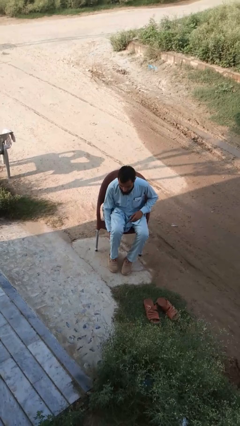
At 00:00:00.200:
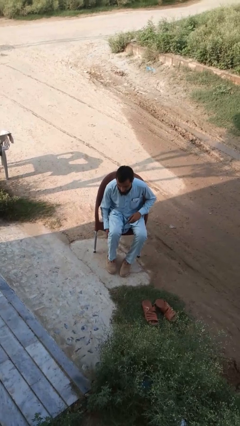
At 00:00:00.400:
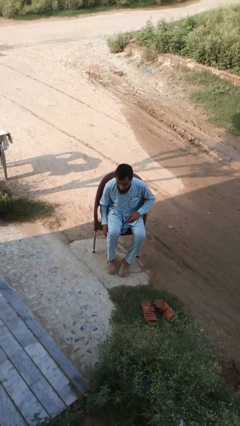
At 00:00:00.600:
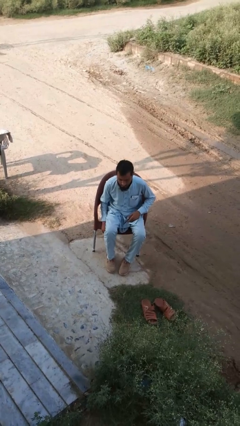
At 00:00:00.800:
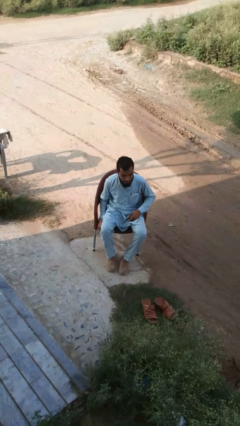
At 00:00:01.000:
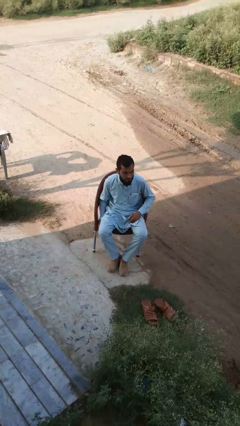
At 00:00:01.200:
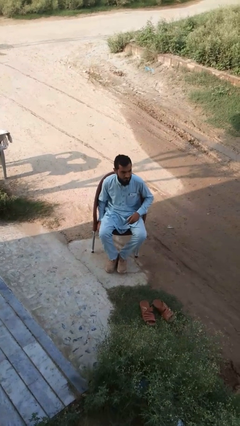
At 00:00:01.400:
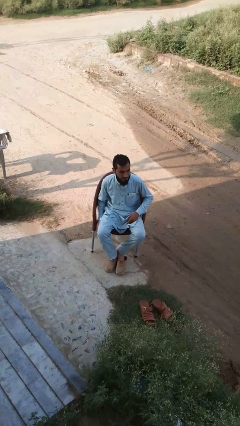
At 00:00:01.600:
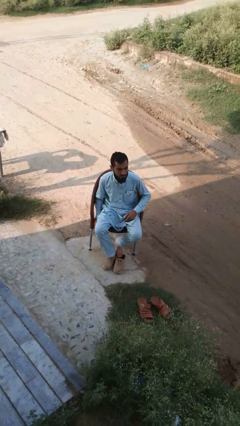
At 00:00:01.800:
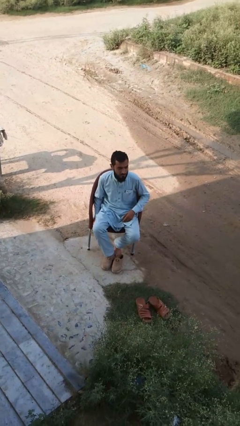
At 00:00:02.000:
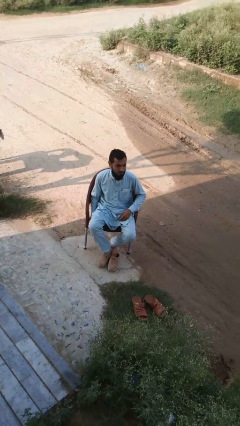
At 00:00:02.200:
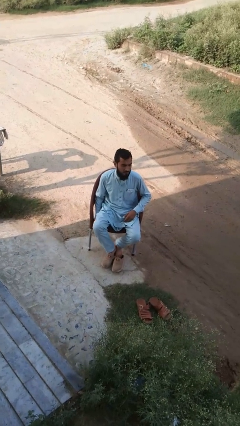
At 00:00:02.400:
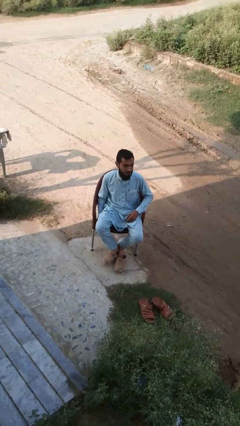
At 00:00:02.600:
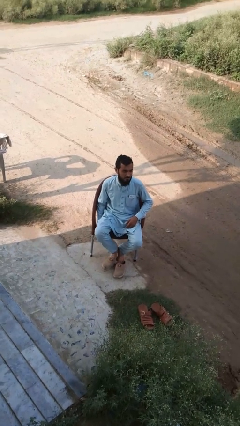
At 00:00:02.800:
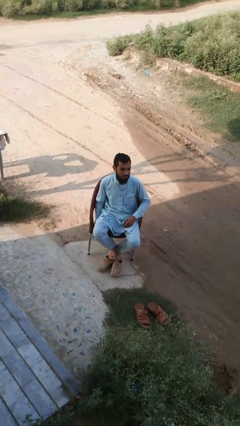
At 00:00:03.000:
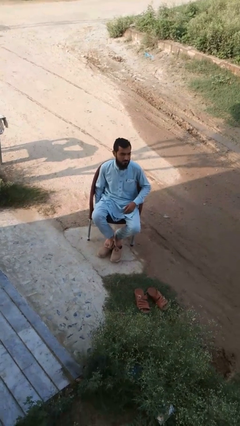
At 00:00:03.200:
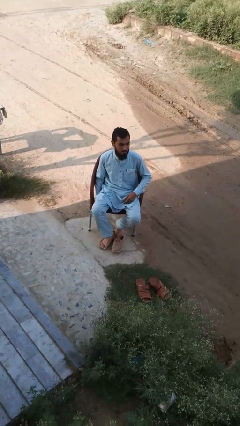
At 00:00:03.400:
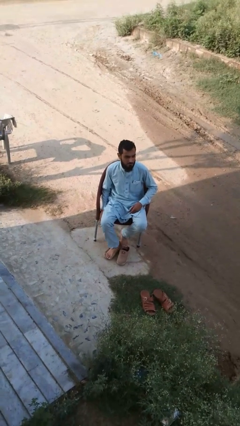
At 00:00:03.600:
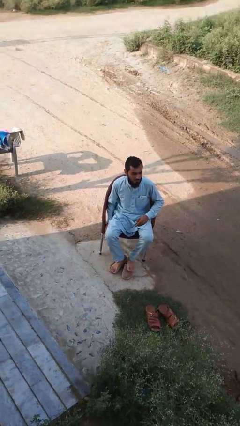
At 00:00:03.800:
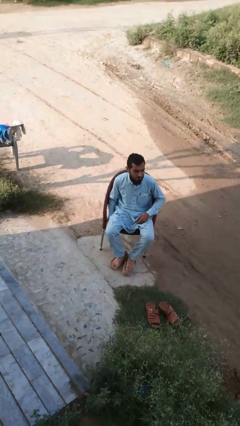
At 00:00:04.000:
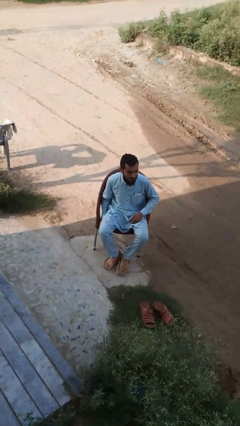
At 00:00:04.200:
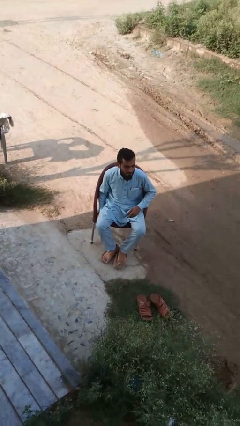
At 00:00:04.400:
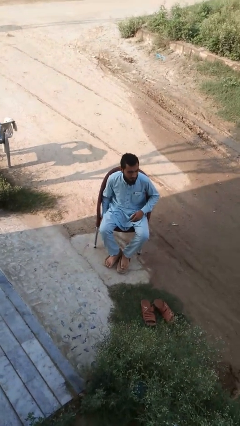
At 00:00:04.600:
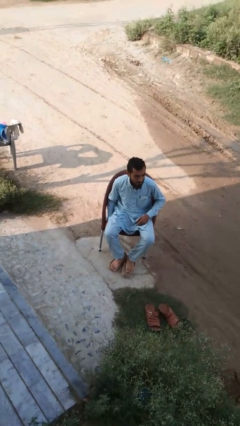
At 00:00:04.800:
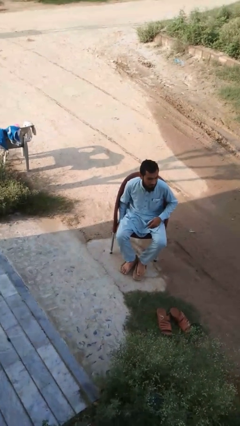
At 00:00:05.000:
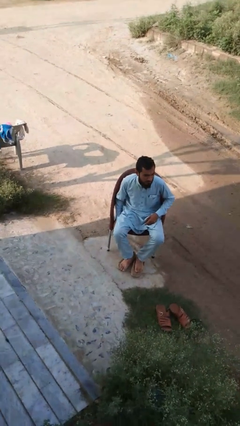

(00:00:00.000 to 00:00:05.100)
person takes off shoes

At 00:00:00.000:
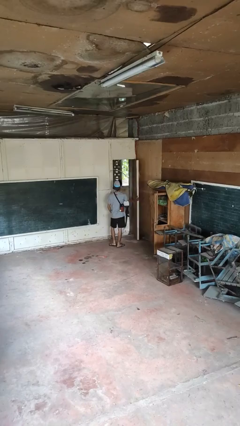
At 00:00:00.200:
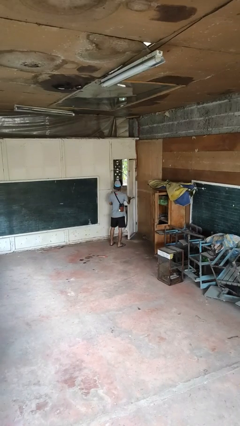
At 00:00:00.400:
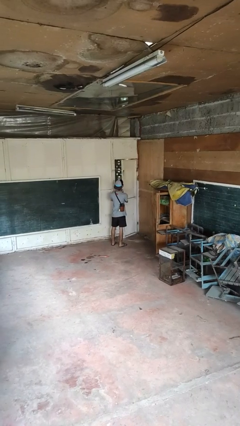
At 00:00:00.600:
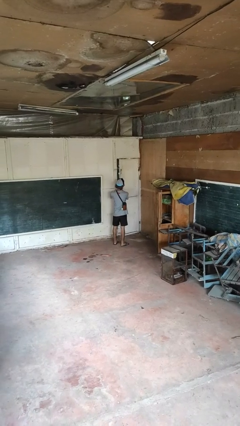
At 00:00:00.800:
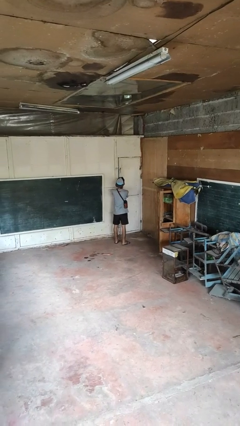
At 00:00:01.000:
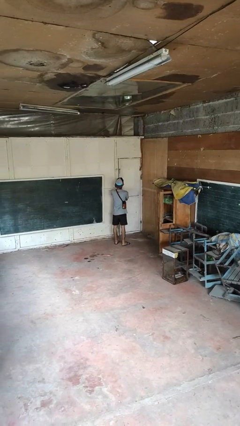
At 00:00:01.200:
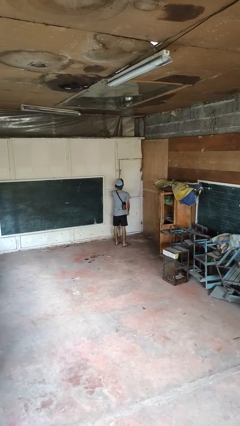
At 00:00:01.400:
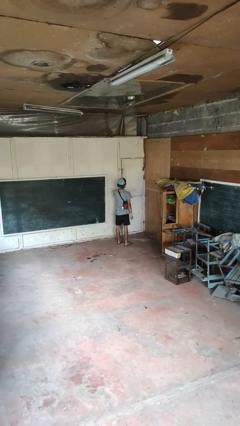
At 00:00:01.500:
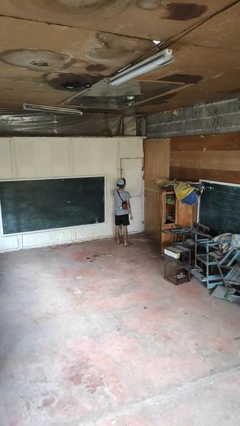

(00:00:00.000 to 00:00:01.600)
person closes facility door

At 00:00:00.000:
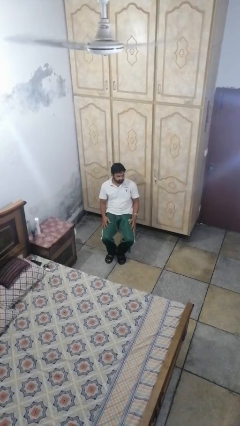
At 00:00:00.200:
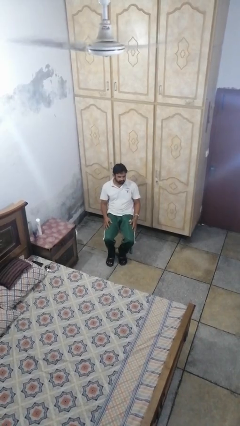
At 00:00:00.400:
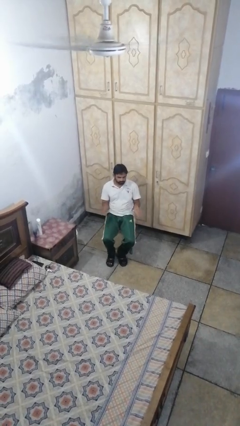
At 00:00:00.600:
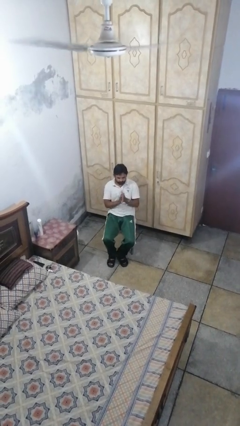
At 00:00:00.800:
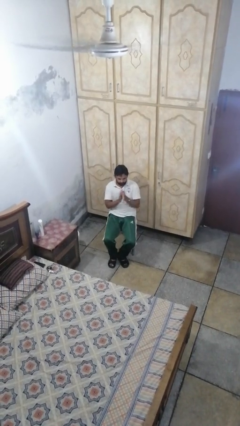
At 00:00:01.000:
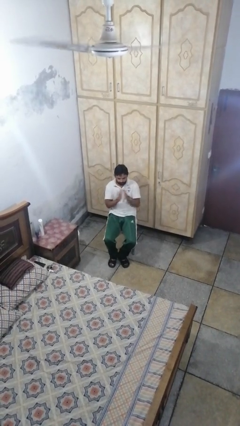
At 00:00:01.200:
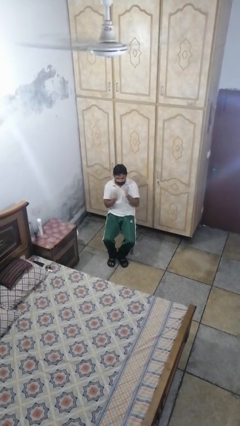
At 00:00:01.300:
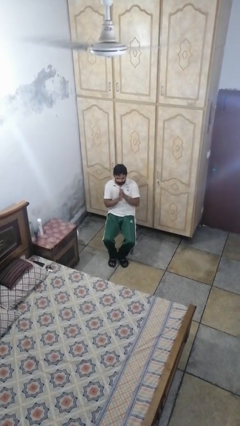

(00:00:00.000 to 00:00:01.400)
person claps hands

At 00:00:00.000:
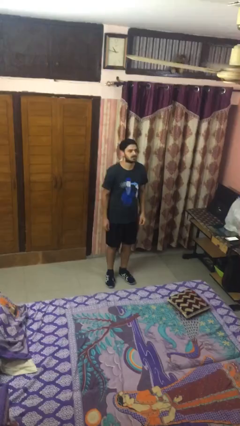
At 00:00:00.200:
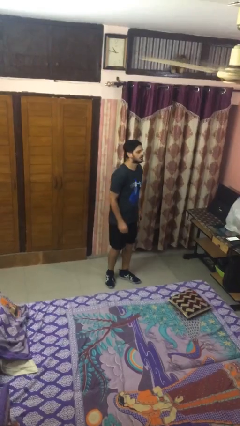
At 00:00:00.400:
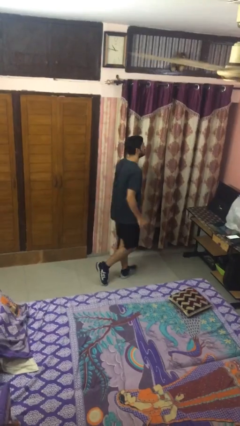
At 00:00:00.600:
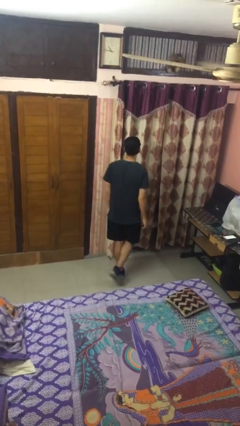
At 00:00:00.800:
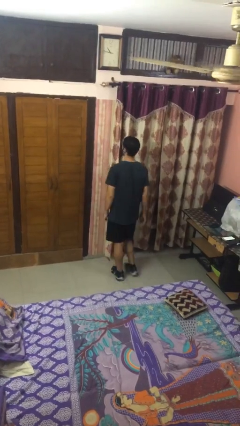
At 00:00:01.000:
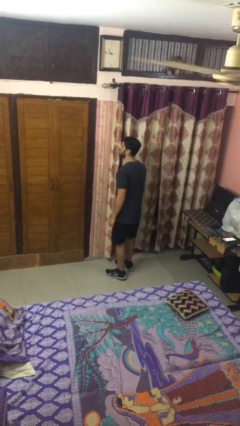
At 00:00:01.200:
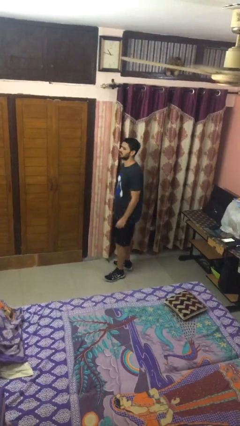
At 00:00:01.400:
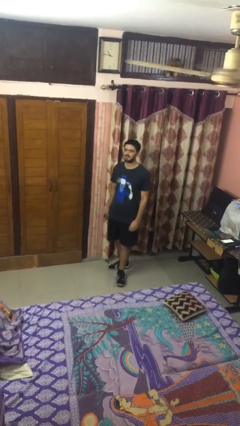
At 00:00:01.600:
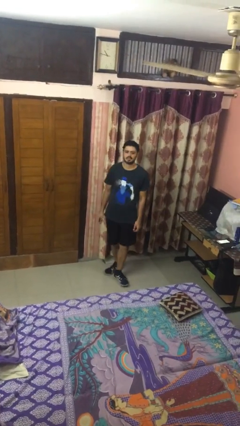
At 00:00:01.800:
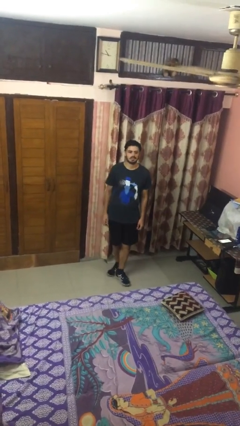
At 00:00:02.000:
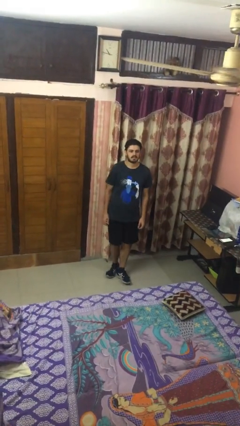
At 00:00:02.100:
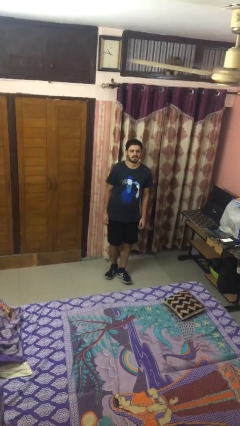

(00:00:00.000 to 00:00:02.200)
person twirls

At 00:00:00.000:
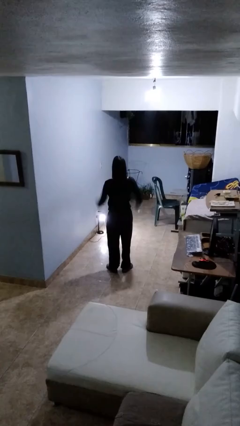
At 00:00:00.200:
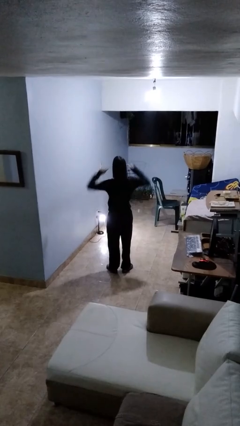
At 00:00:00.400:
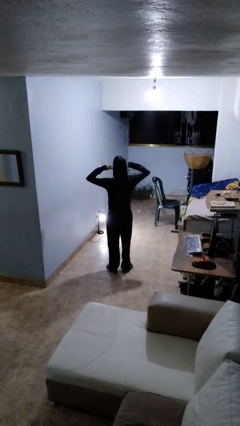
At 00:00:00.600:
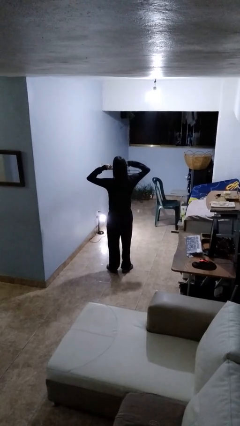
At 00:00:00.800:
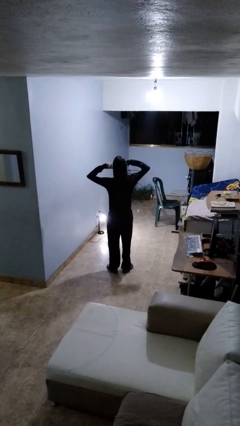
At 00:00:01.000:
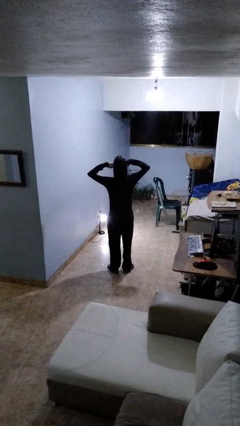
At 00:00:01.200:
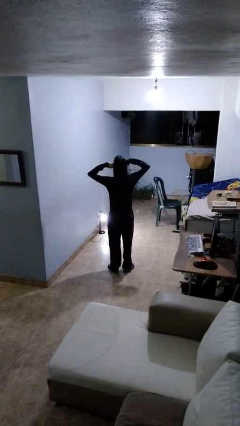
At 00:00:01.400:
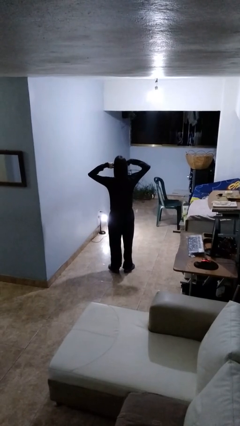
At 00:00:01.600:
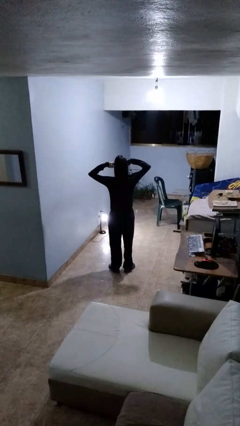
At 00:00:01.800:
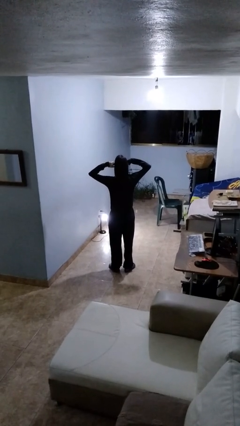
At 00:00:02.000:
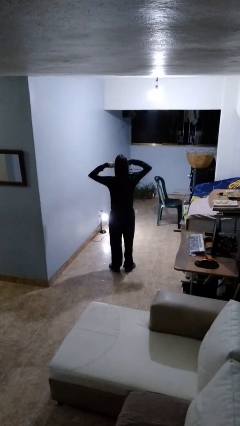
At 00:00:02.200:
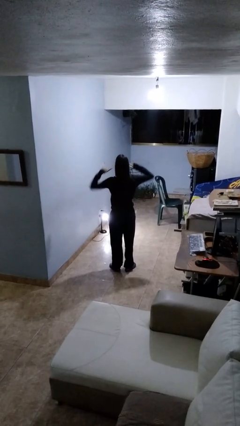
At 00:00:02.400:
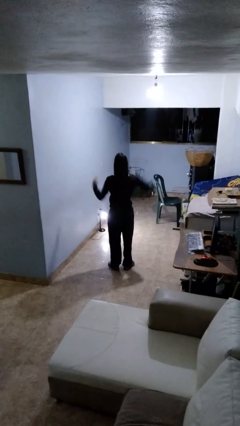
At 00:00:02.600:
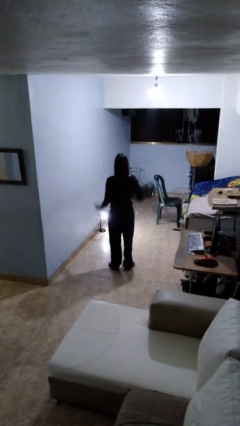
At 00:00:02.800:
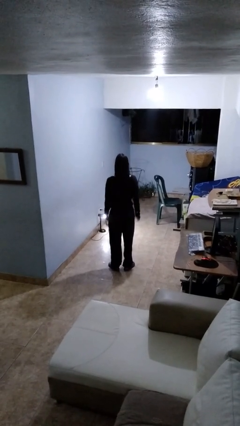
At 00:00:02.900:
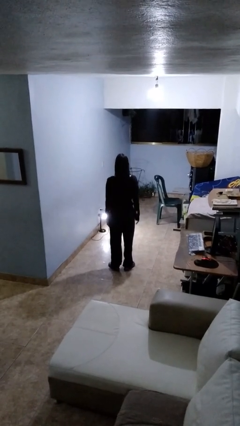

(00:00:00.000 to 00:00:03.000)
person puts fingers in ear

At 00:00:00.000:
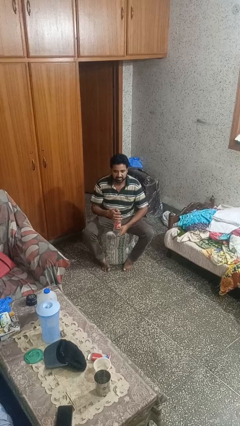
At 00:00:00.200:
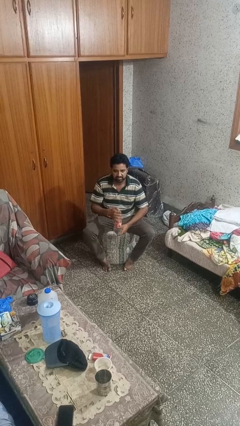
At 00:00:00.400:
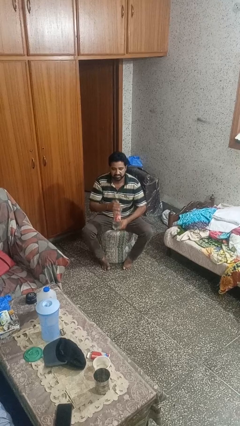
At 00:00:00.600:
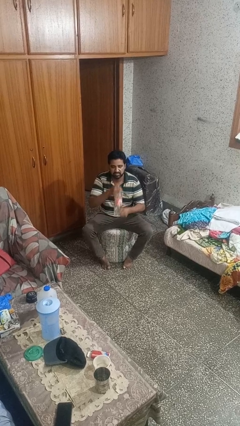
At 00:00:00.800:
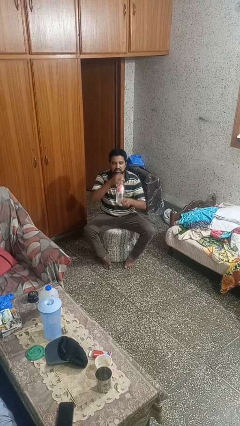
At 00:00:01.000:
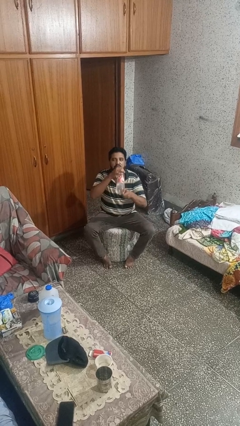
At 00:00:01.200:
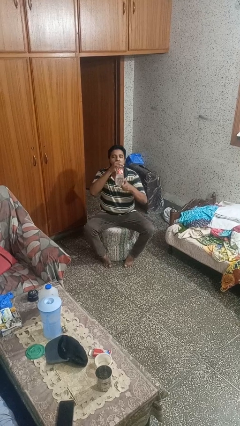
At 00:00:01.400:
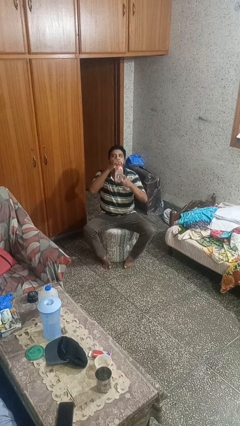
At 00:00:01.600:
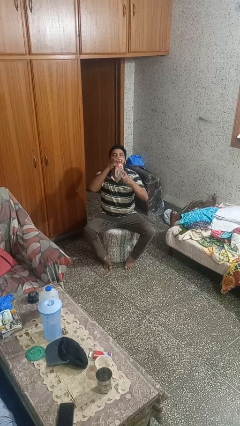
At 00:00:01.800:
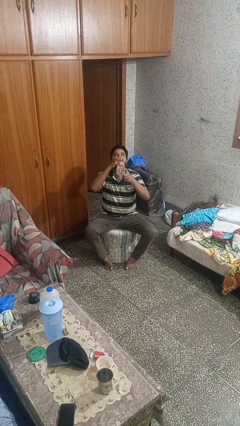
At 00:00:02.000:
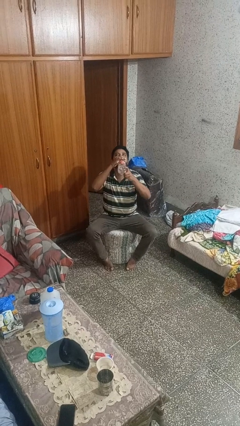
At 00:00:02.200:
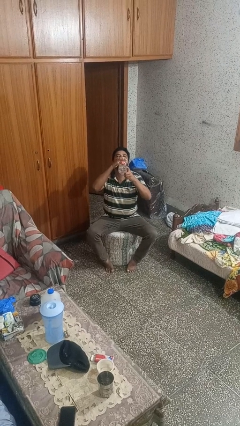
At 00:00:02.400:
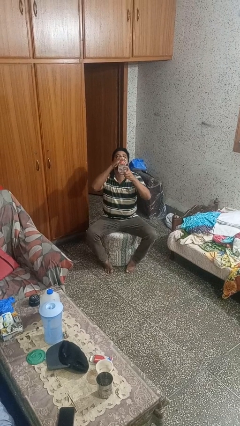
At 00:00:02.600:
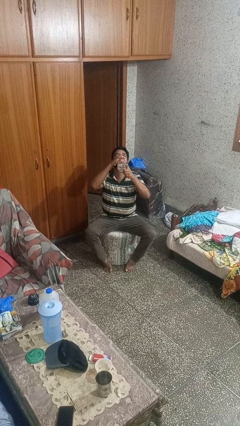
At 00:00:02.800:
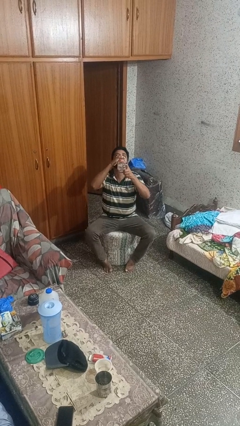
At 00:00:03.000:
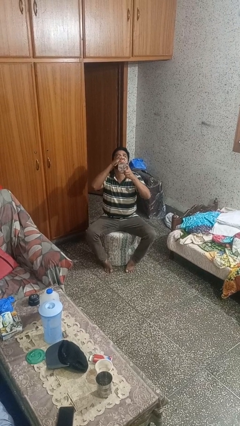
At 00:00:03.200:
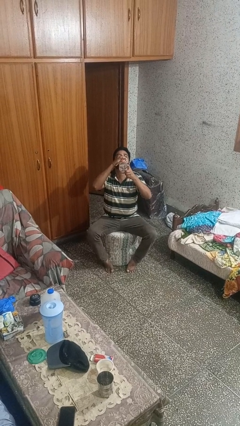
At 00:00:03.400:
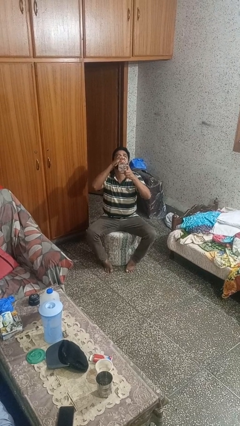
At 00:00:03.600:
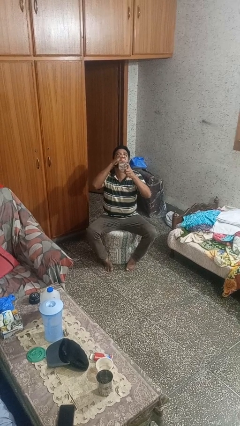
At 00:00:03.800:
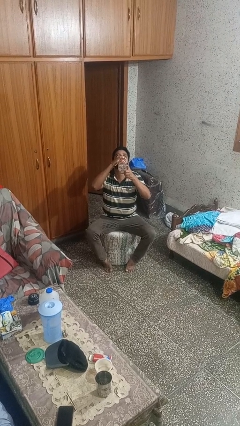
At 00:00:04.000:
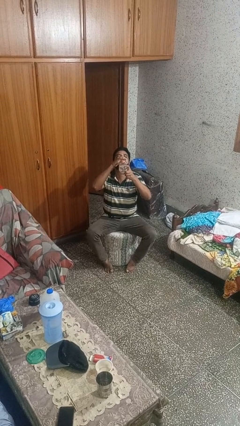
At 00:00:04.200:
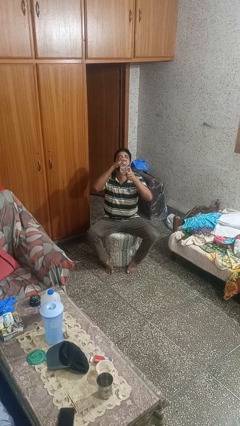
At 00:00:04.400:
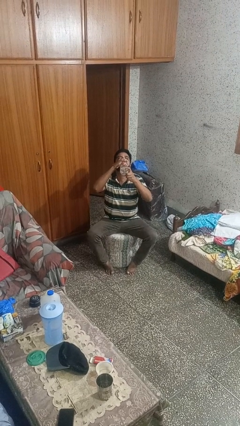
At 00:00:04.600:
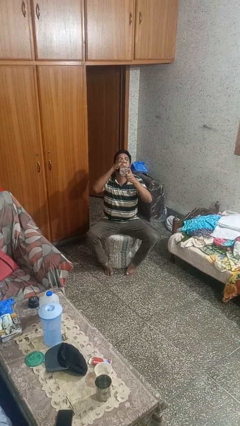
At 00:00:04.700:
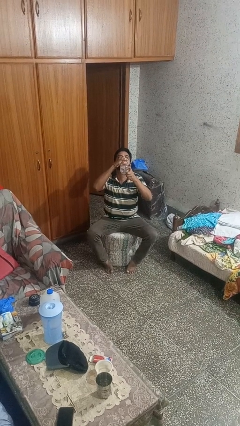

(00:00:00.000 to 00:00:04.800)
person drinks from bottle
